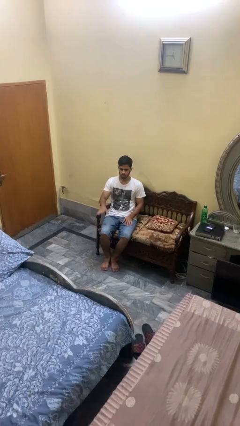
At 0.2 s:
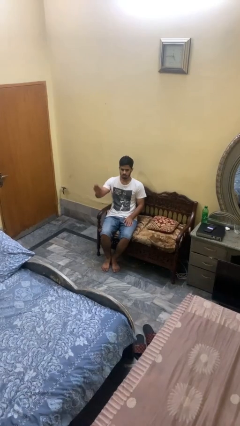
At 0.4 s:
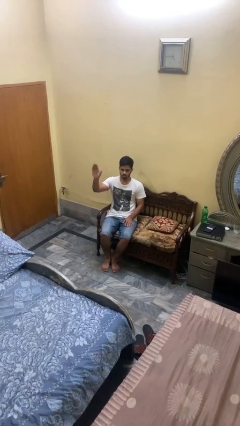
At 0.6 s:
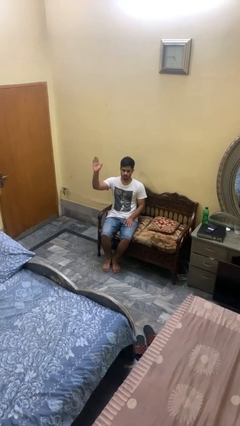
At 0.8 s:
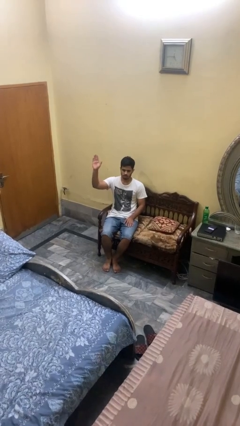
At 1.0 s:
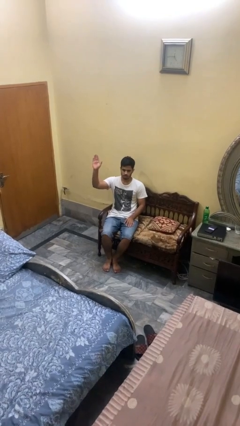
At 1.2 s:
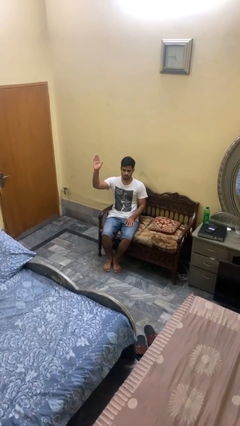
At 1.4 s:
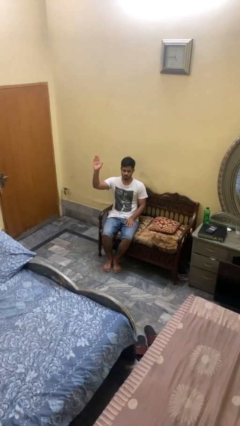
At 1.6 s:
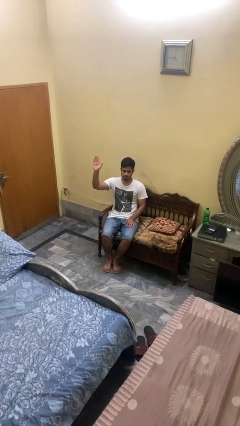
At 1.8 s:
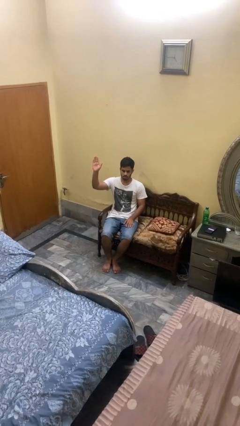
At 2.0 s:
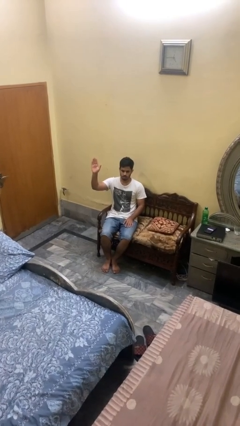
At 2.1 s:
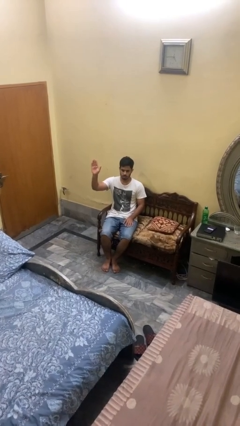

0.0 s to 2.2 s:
person gestures raise hand

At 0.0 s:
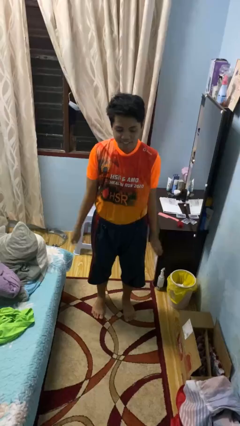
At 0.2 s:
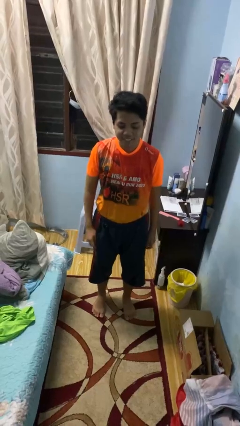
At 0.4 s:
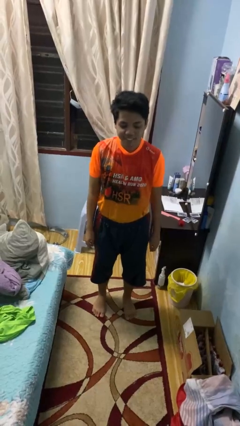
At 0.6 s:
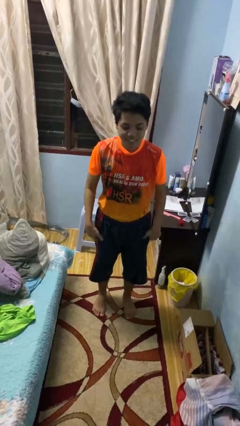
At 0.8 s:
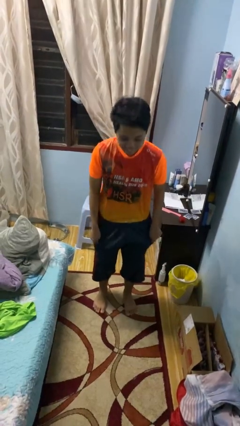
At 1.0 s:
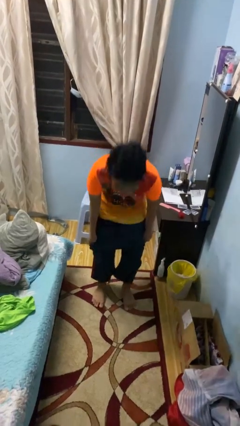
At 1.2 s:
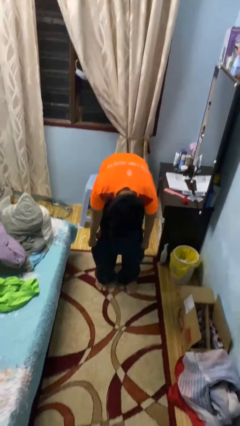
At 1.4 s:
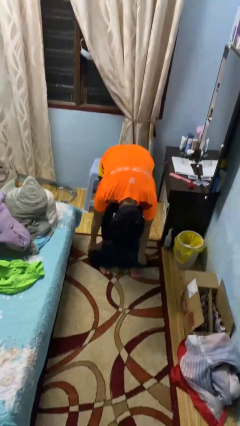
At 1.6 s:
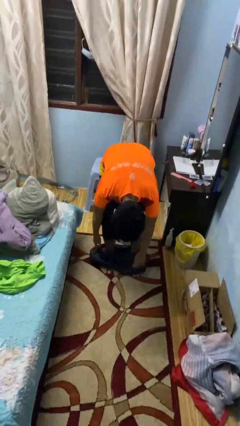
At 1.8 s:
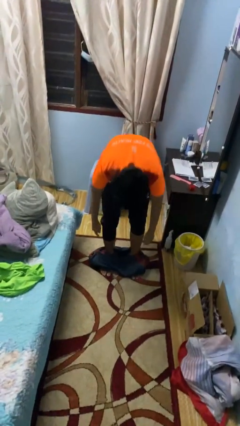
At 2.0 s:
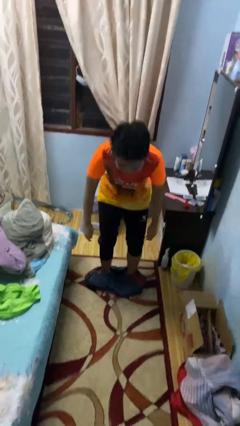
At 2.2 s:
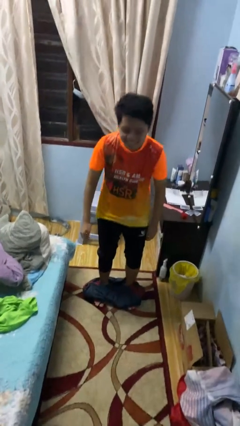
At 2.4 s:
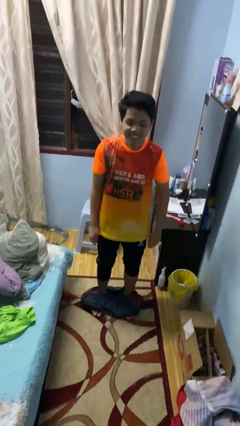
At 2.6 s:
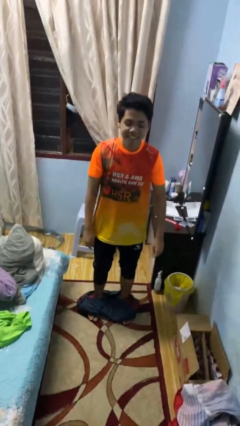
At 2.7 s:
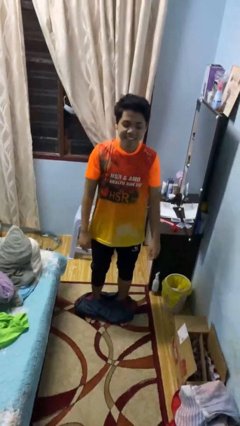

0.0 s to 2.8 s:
person takes off pants

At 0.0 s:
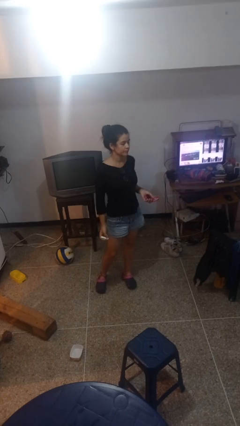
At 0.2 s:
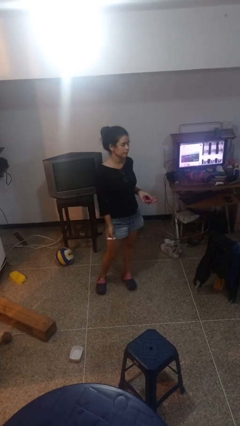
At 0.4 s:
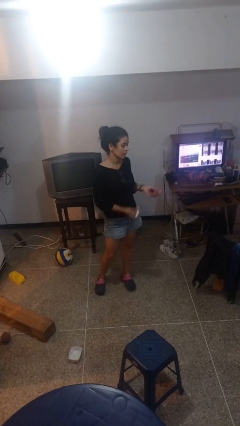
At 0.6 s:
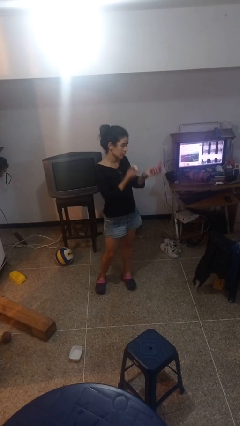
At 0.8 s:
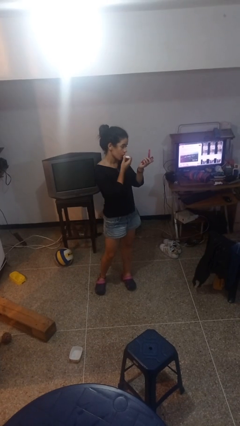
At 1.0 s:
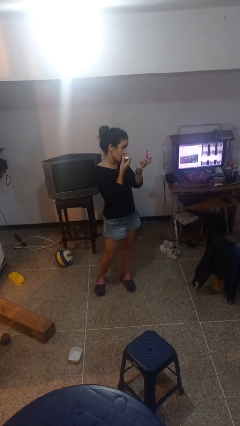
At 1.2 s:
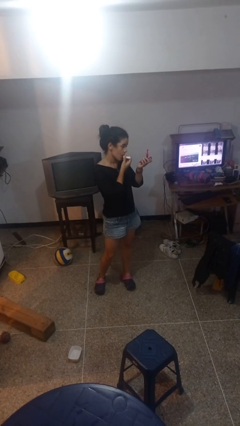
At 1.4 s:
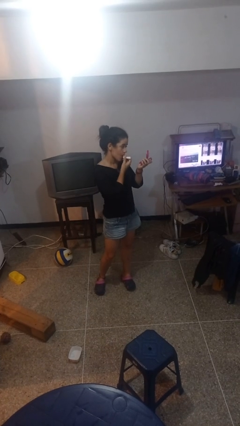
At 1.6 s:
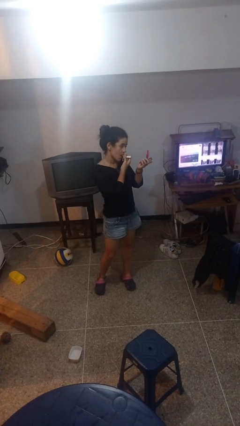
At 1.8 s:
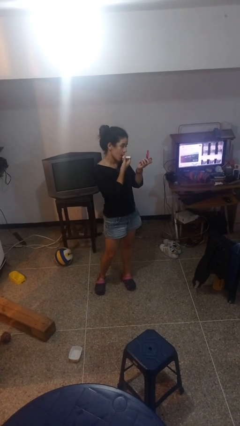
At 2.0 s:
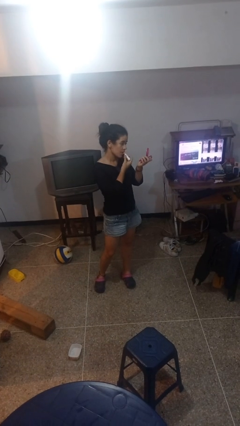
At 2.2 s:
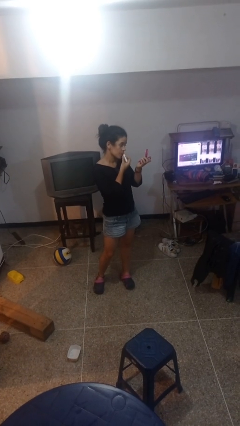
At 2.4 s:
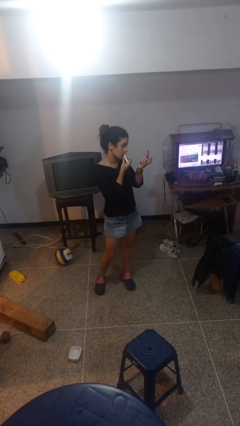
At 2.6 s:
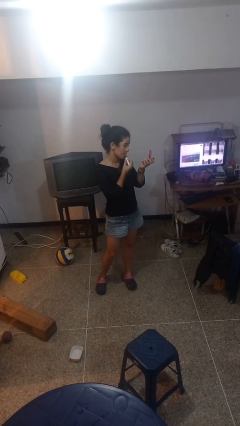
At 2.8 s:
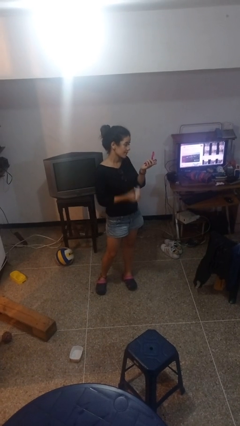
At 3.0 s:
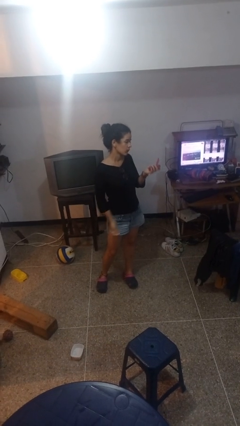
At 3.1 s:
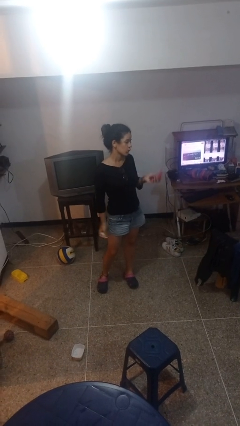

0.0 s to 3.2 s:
person applies lip makeup

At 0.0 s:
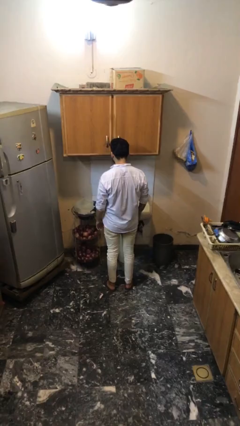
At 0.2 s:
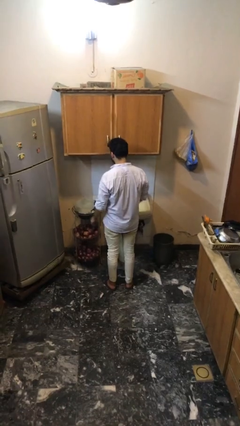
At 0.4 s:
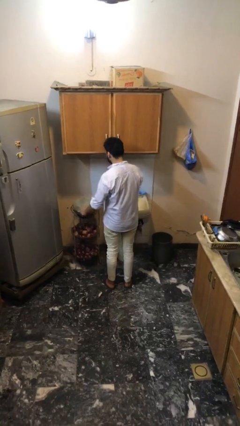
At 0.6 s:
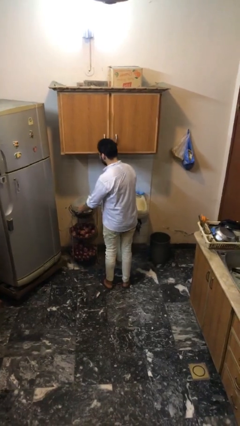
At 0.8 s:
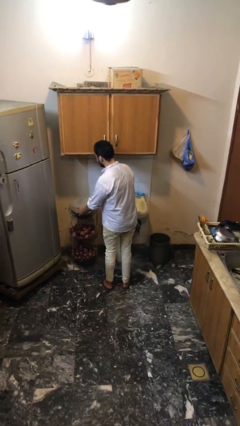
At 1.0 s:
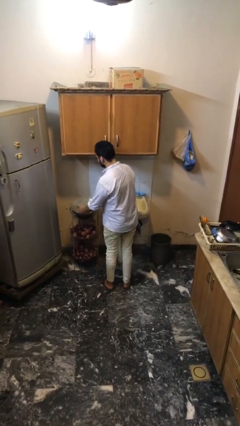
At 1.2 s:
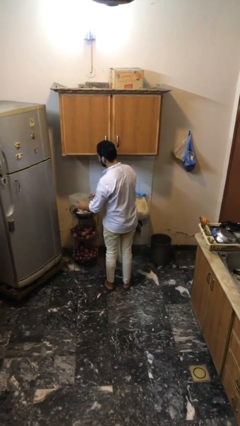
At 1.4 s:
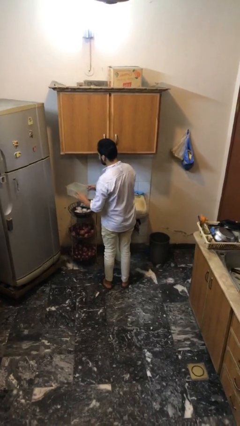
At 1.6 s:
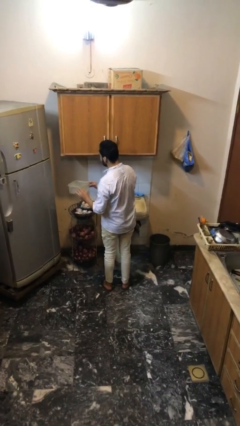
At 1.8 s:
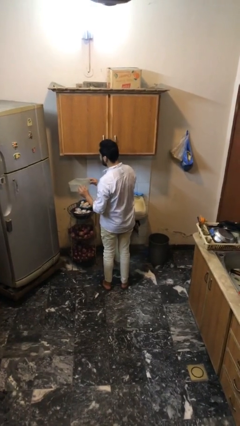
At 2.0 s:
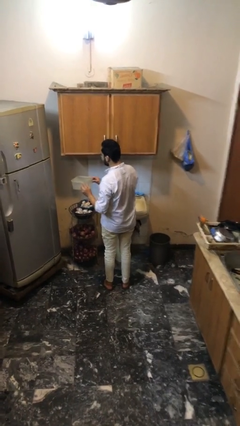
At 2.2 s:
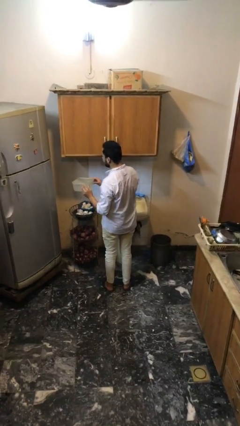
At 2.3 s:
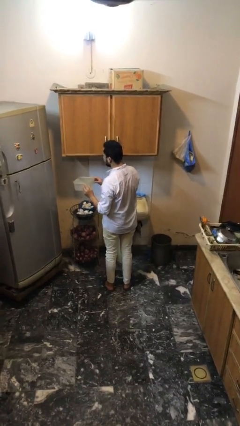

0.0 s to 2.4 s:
person picks up object from table

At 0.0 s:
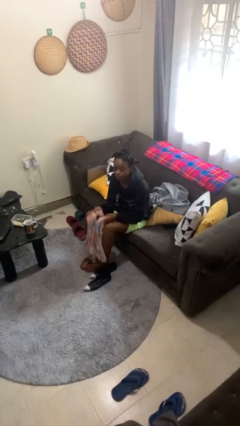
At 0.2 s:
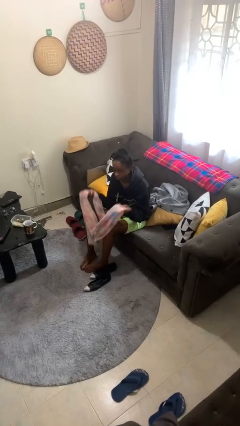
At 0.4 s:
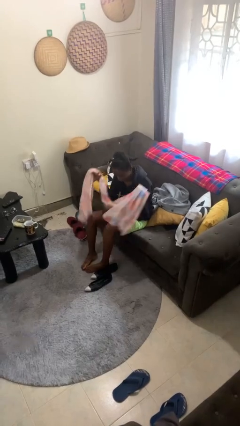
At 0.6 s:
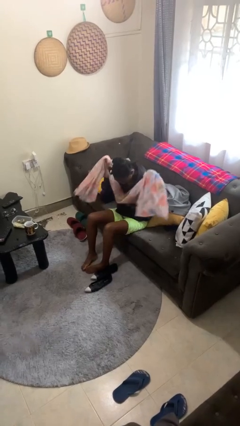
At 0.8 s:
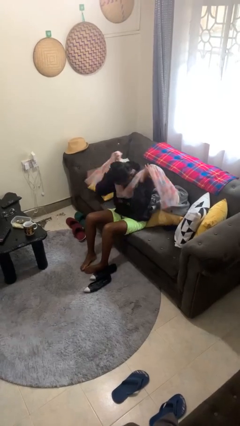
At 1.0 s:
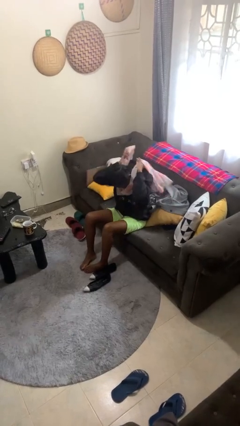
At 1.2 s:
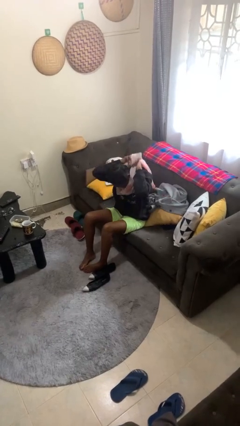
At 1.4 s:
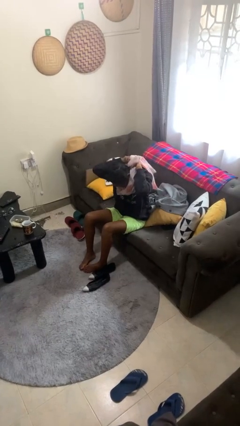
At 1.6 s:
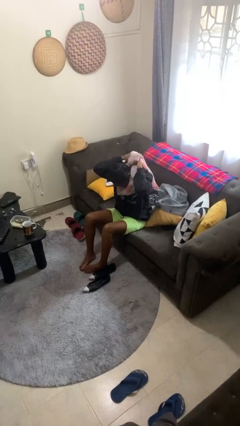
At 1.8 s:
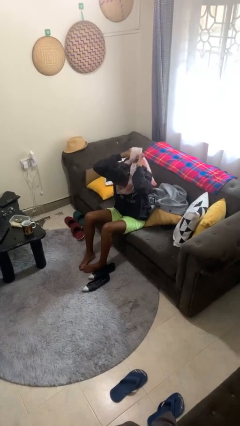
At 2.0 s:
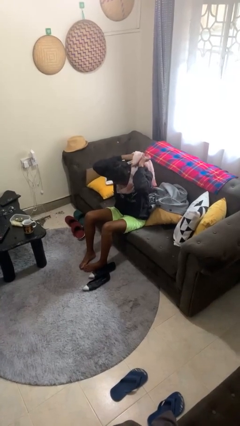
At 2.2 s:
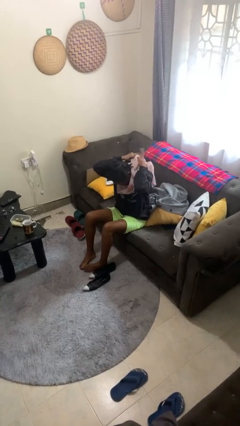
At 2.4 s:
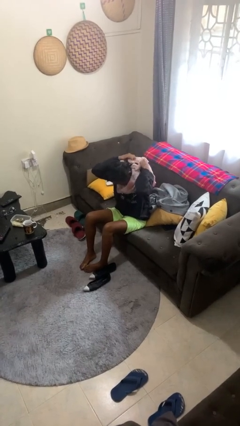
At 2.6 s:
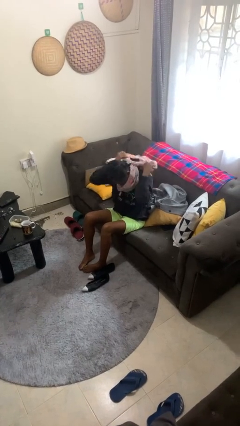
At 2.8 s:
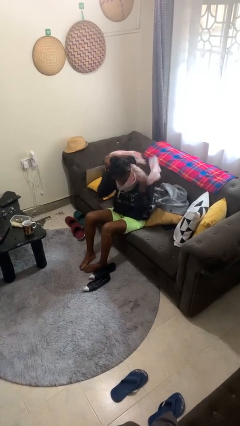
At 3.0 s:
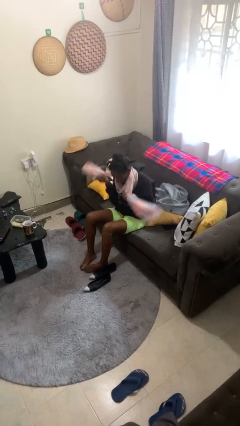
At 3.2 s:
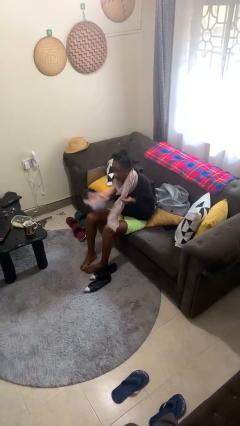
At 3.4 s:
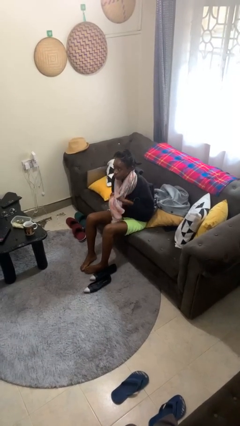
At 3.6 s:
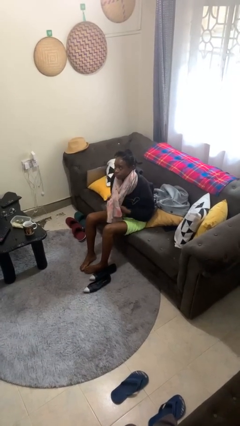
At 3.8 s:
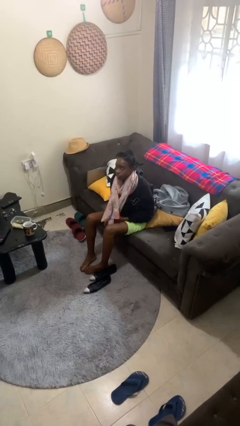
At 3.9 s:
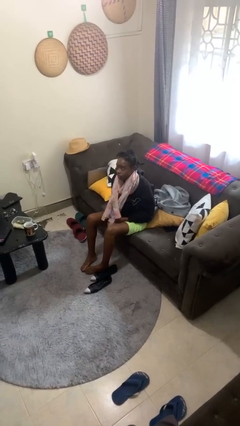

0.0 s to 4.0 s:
person puts on scarf

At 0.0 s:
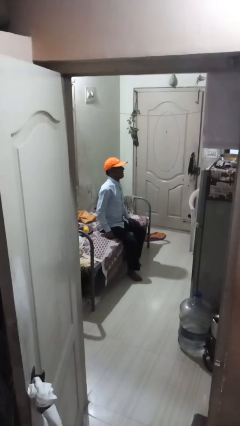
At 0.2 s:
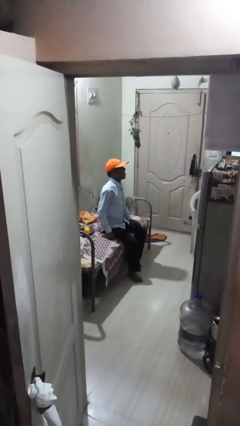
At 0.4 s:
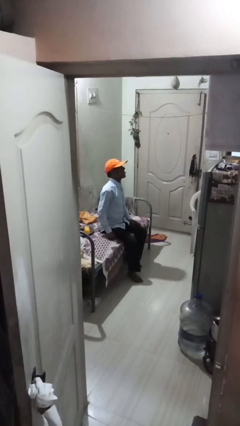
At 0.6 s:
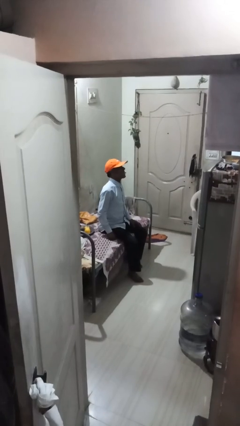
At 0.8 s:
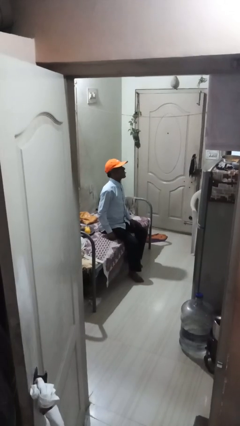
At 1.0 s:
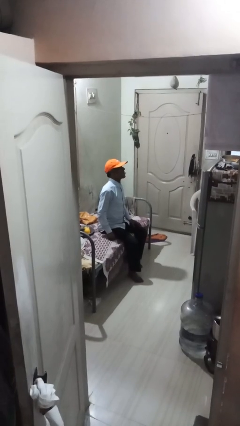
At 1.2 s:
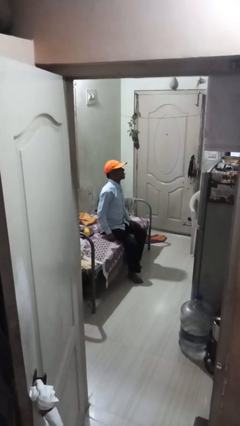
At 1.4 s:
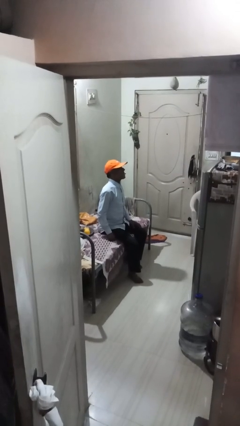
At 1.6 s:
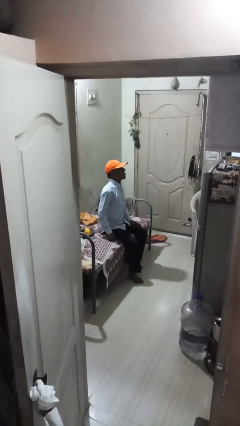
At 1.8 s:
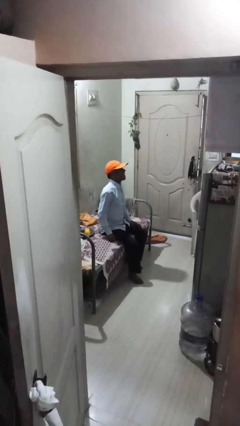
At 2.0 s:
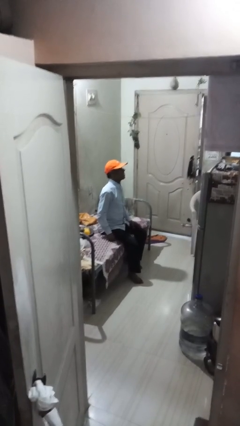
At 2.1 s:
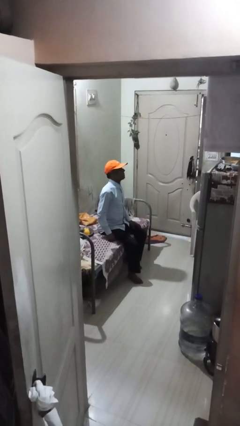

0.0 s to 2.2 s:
person sticks out tongue

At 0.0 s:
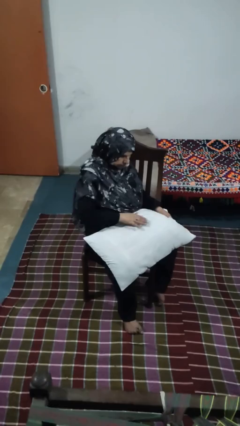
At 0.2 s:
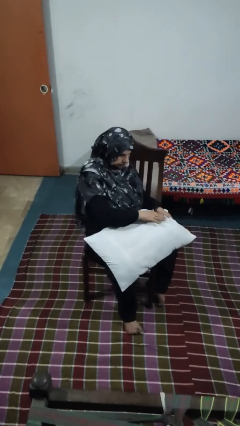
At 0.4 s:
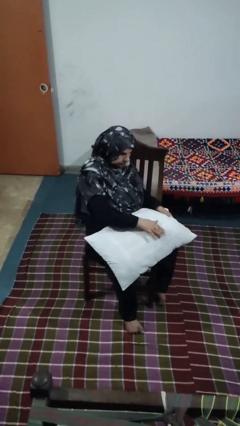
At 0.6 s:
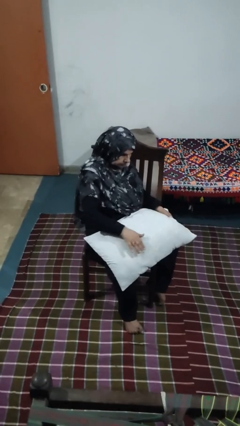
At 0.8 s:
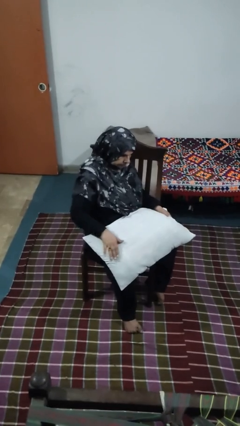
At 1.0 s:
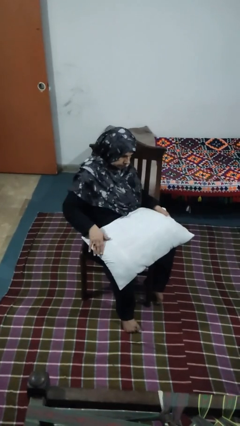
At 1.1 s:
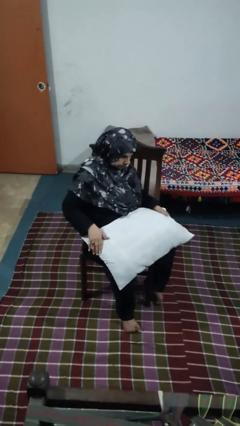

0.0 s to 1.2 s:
person waves hand over object
